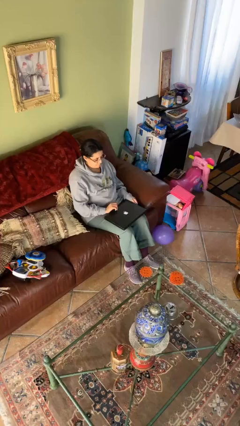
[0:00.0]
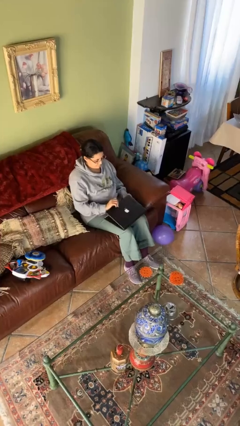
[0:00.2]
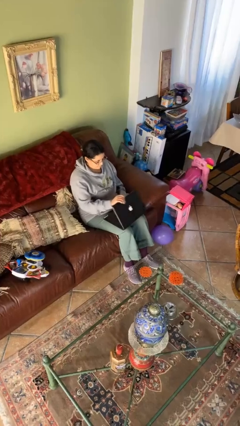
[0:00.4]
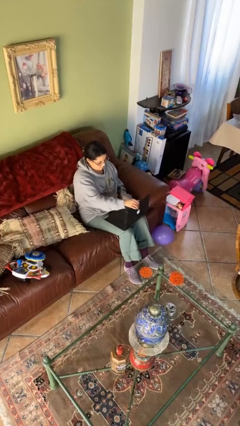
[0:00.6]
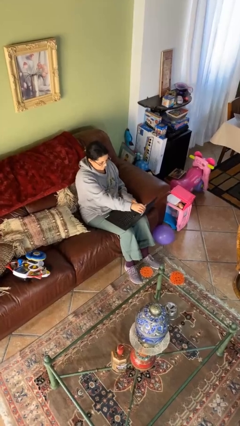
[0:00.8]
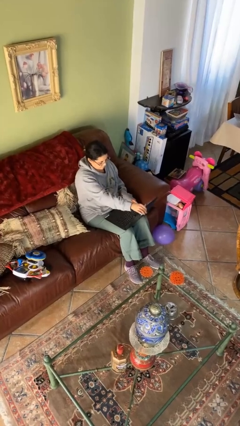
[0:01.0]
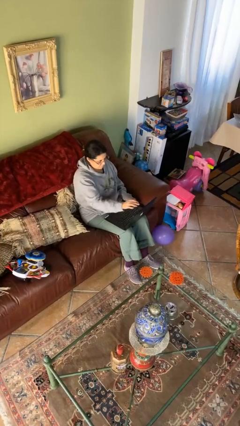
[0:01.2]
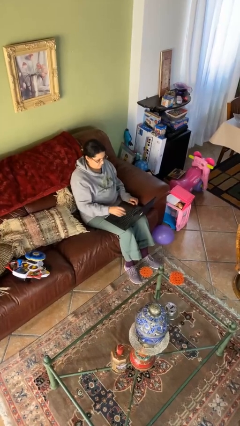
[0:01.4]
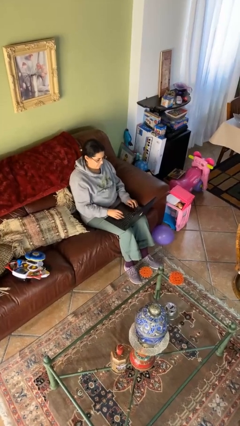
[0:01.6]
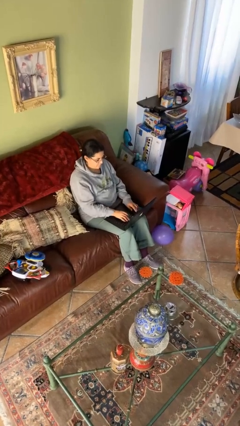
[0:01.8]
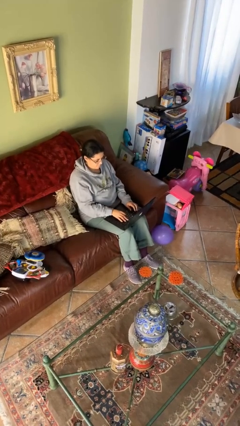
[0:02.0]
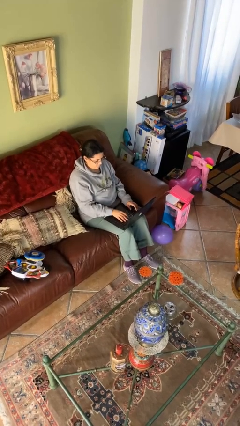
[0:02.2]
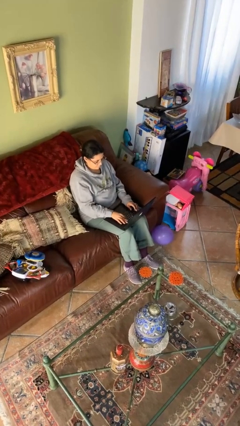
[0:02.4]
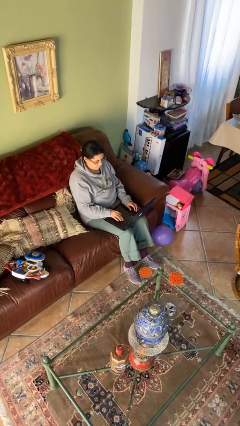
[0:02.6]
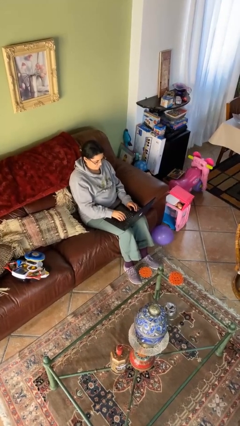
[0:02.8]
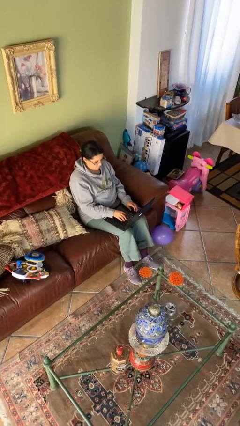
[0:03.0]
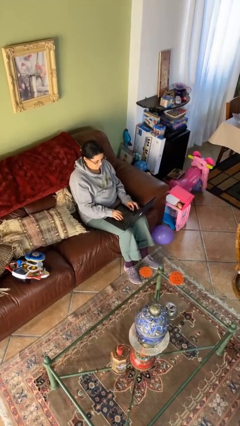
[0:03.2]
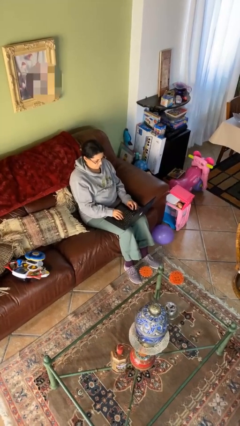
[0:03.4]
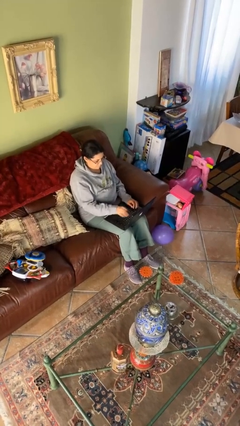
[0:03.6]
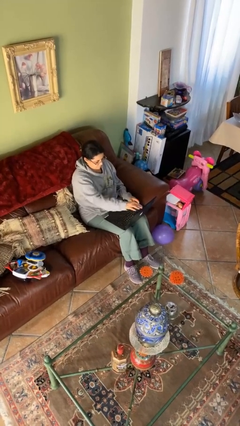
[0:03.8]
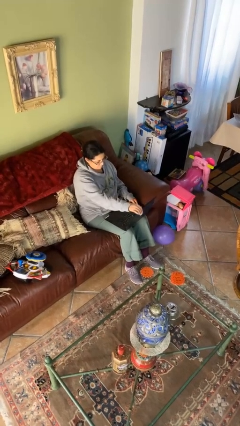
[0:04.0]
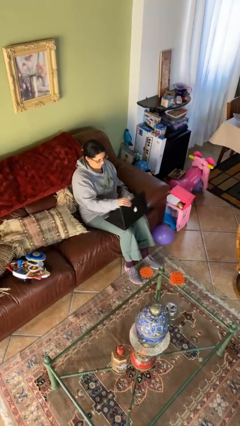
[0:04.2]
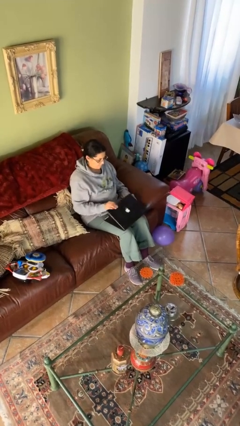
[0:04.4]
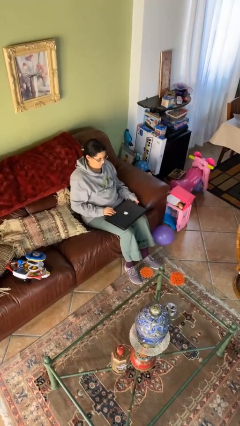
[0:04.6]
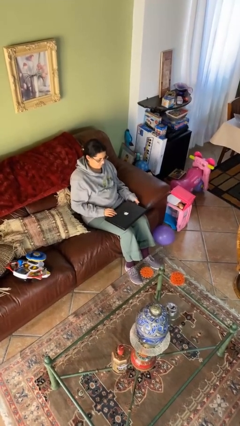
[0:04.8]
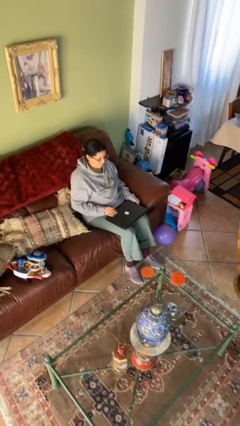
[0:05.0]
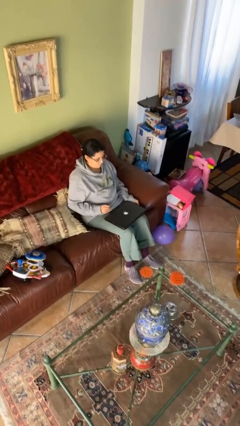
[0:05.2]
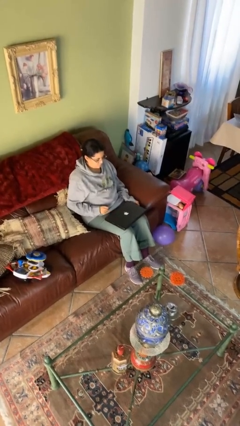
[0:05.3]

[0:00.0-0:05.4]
person interacts with laptop

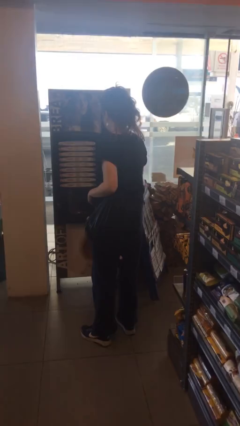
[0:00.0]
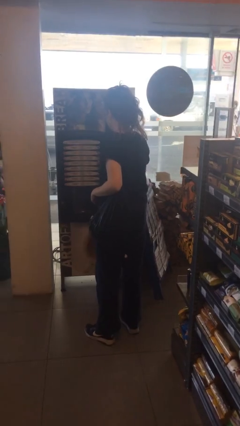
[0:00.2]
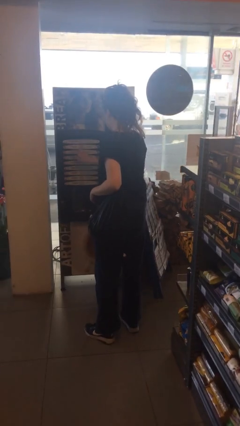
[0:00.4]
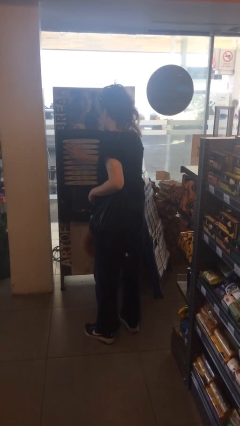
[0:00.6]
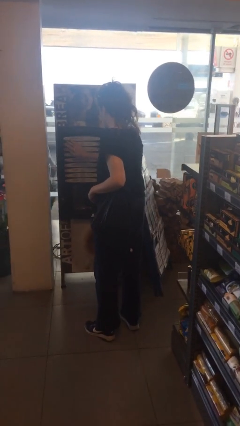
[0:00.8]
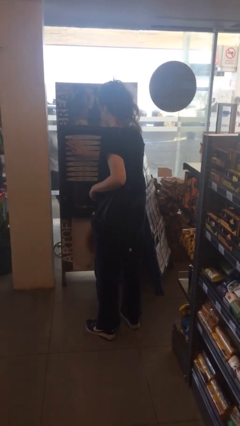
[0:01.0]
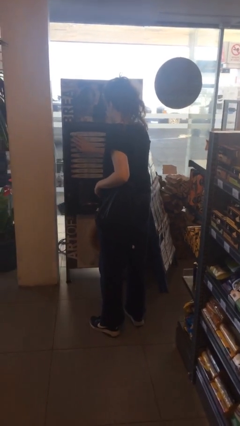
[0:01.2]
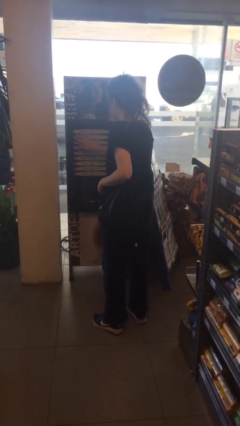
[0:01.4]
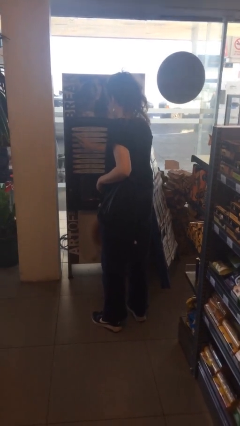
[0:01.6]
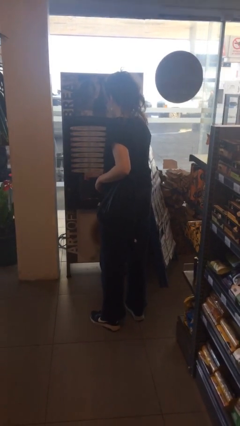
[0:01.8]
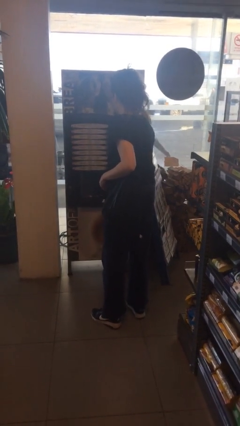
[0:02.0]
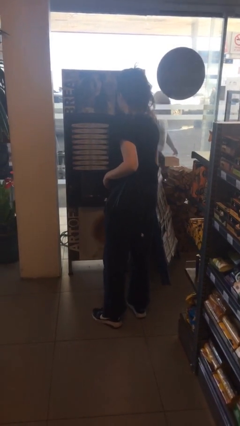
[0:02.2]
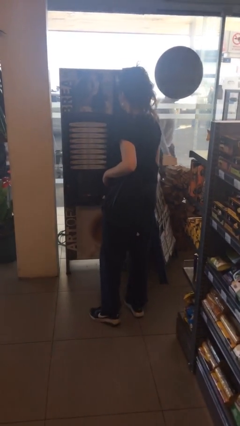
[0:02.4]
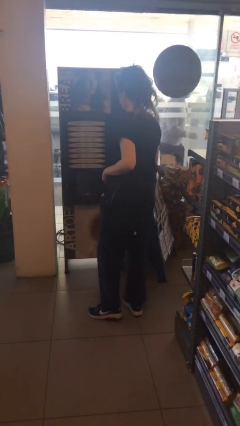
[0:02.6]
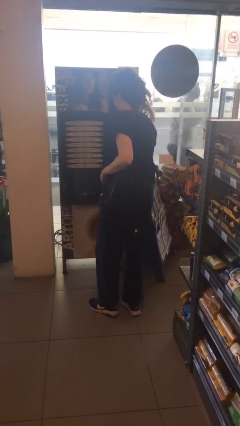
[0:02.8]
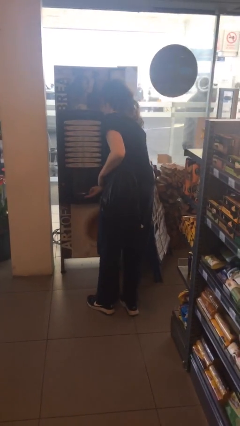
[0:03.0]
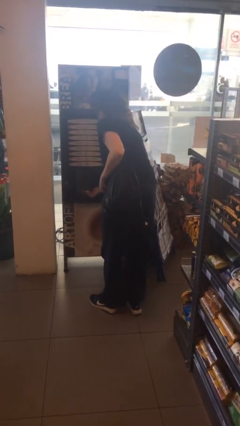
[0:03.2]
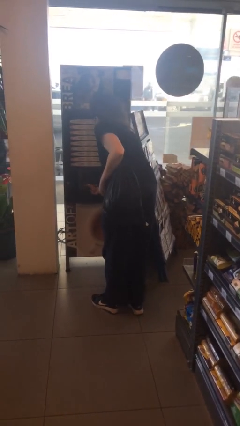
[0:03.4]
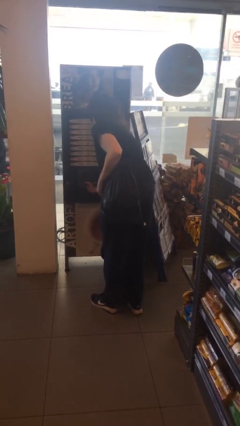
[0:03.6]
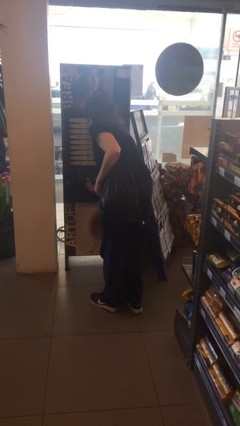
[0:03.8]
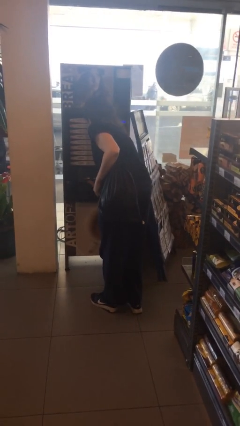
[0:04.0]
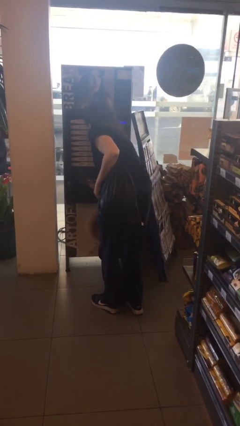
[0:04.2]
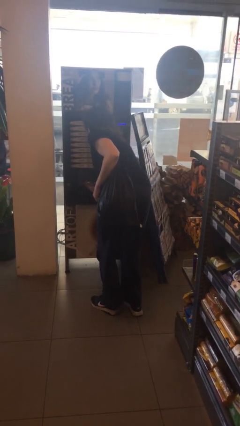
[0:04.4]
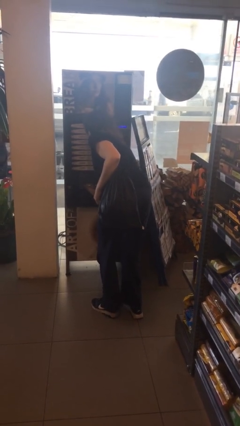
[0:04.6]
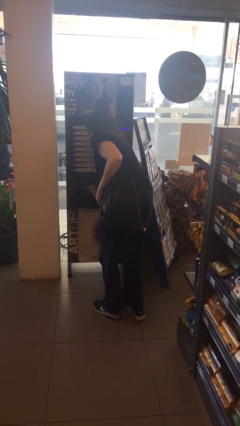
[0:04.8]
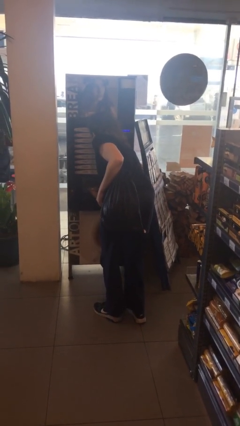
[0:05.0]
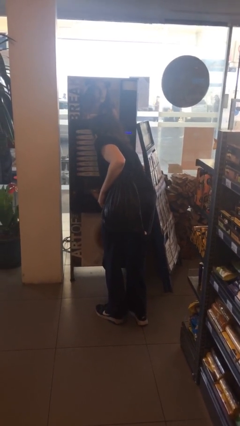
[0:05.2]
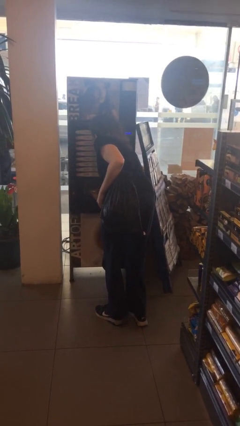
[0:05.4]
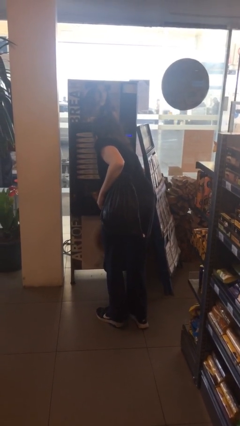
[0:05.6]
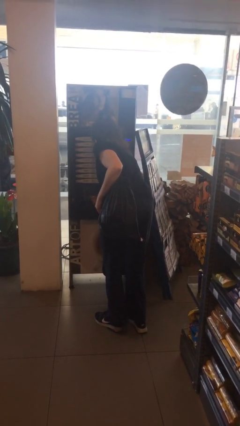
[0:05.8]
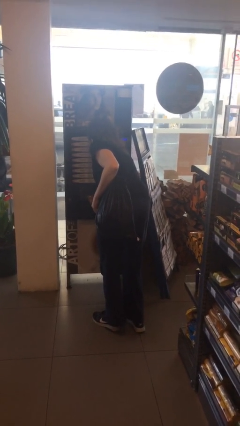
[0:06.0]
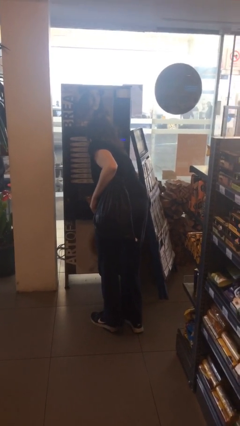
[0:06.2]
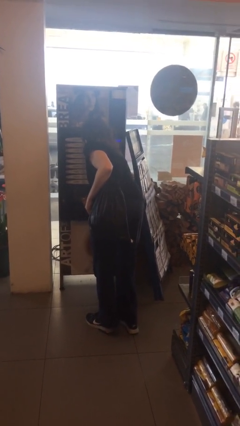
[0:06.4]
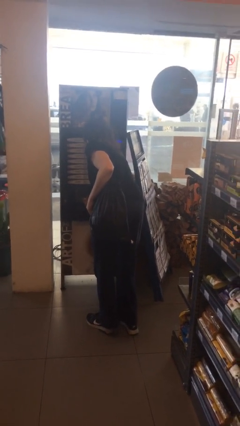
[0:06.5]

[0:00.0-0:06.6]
person purchases from machine

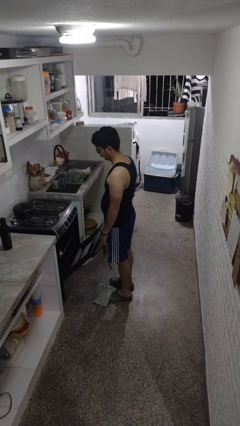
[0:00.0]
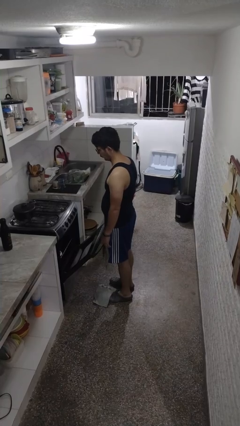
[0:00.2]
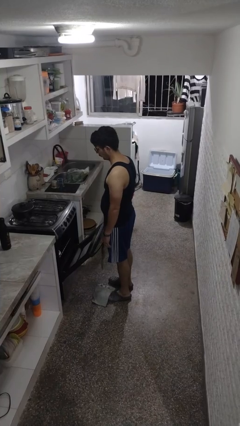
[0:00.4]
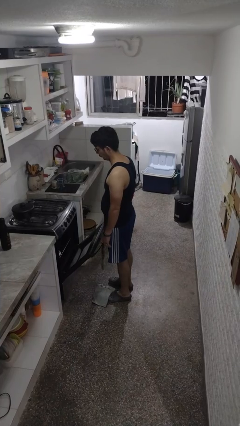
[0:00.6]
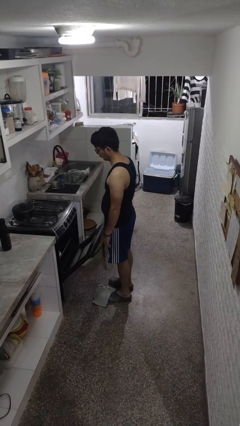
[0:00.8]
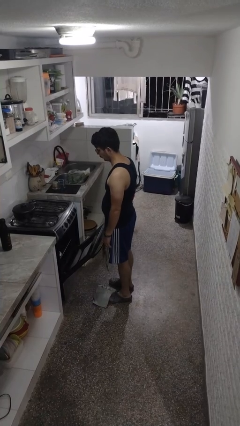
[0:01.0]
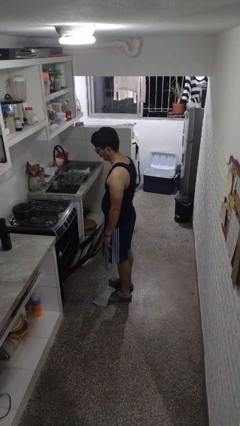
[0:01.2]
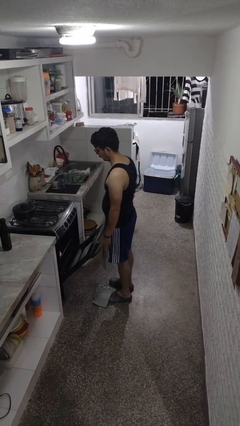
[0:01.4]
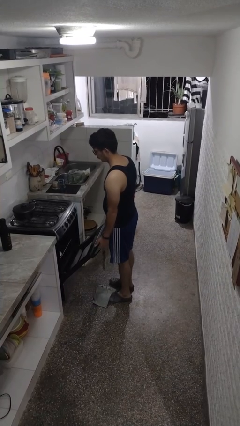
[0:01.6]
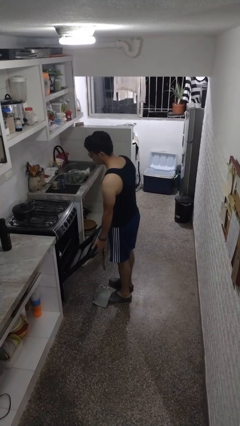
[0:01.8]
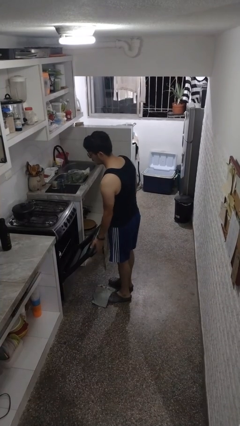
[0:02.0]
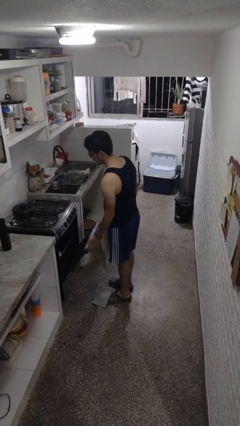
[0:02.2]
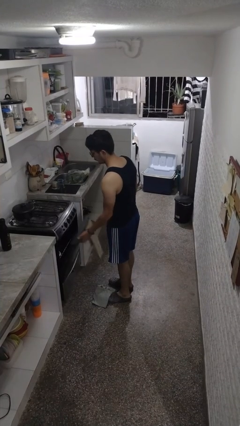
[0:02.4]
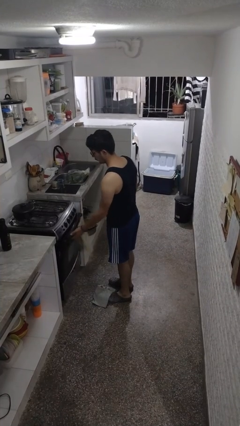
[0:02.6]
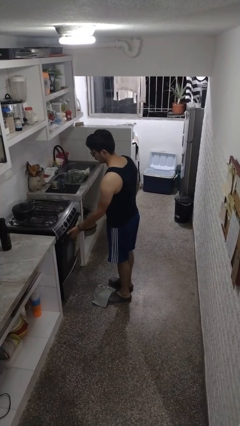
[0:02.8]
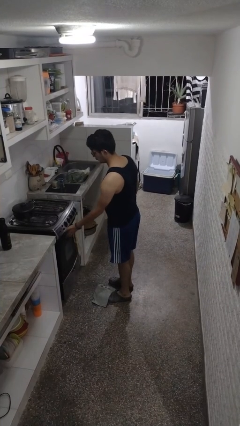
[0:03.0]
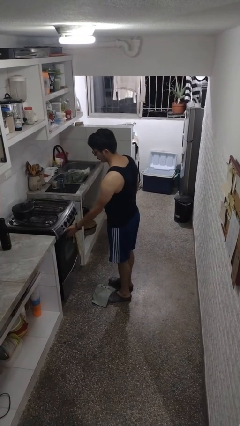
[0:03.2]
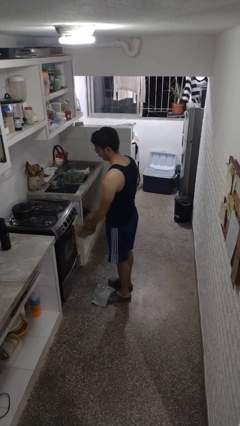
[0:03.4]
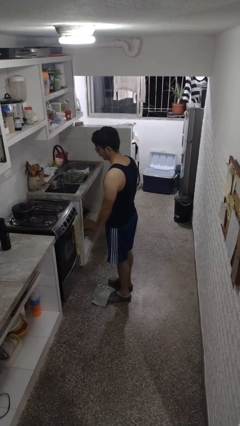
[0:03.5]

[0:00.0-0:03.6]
person closes oven door

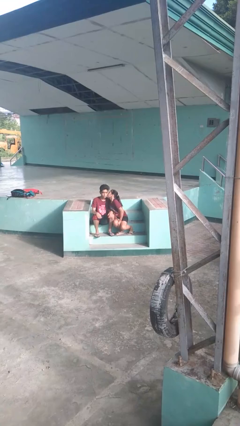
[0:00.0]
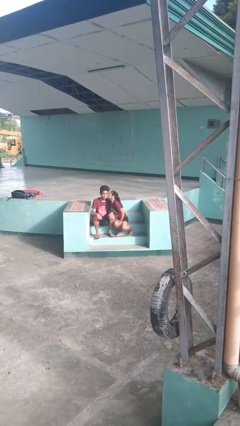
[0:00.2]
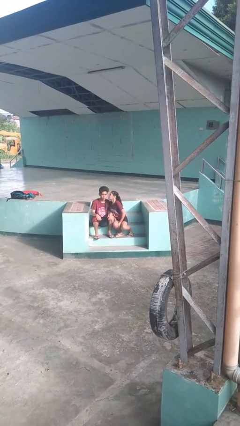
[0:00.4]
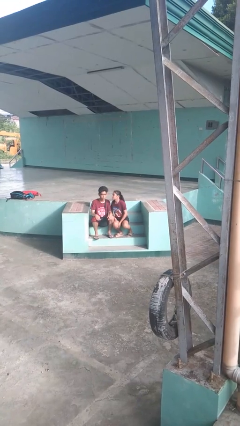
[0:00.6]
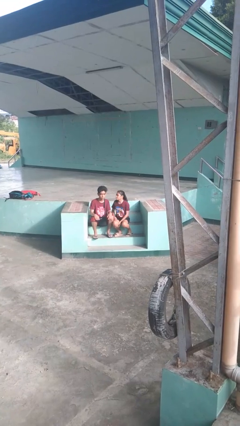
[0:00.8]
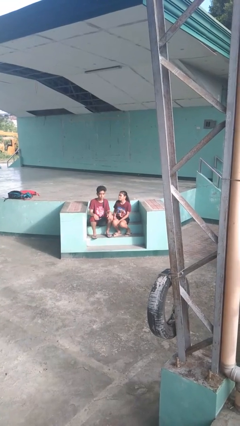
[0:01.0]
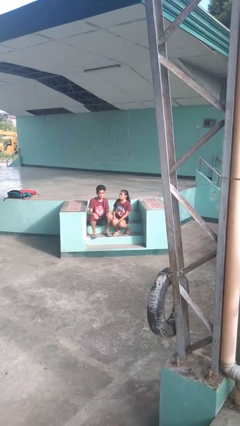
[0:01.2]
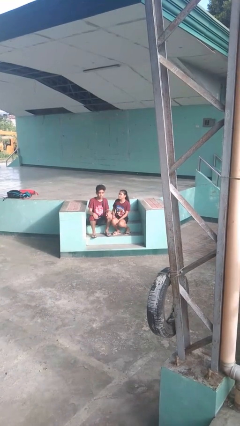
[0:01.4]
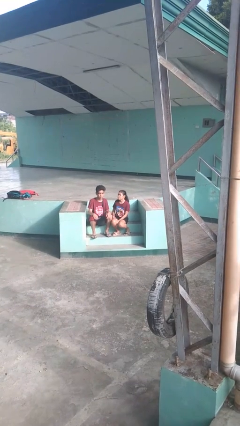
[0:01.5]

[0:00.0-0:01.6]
person kisses cheek of person

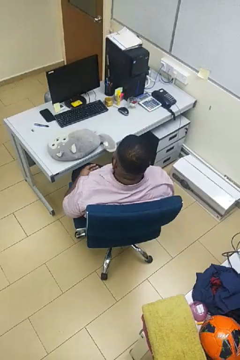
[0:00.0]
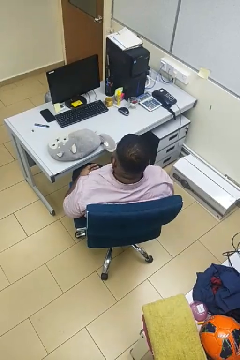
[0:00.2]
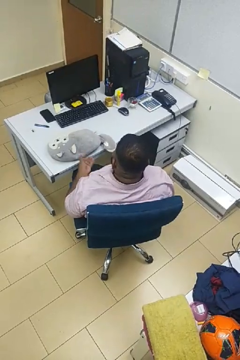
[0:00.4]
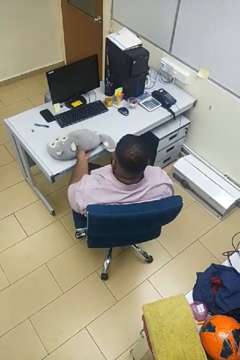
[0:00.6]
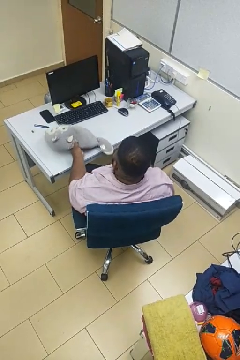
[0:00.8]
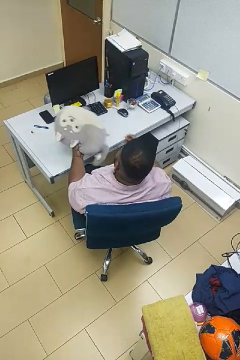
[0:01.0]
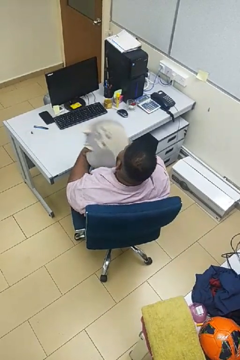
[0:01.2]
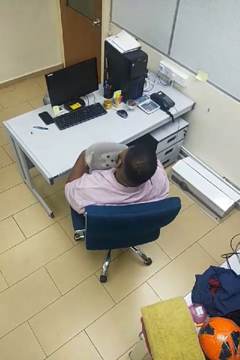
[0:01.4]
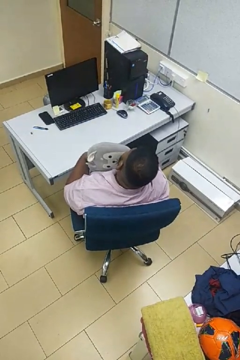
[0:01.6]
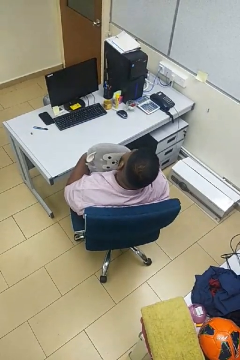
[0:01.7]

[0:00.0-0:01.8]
person hugs stuffed animal
